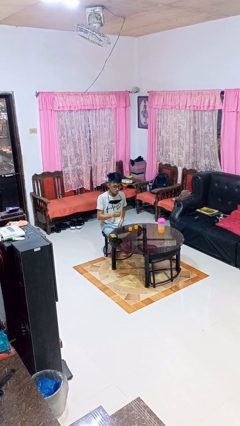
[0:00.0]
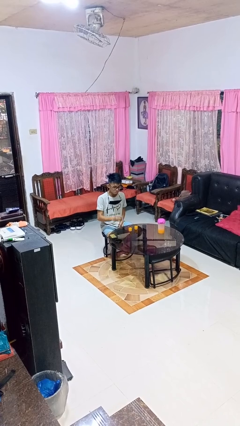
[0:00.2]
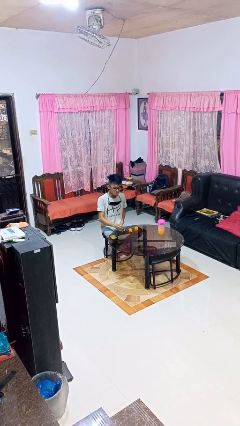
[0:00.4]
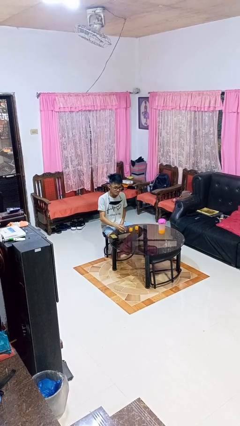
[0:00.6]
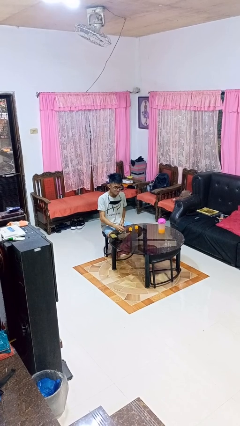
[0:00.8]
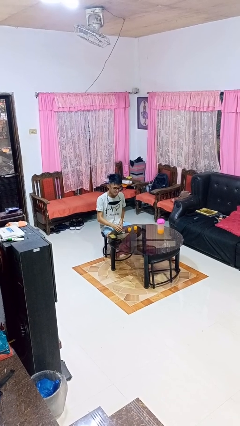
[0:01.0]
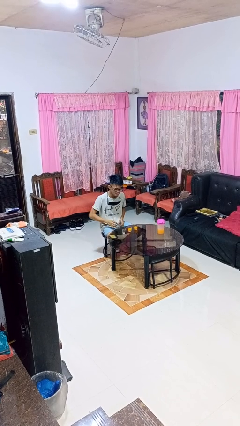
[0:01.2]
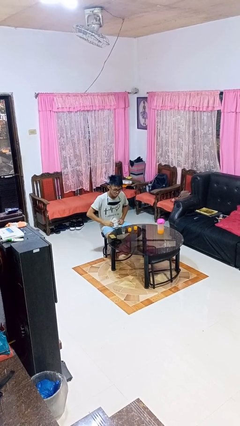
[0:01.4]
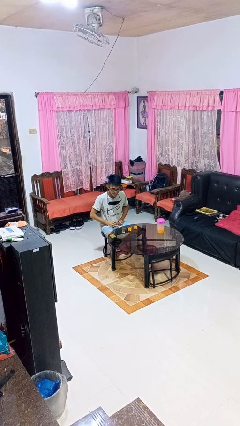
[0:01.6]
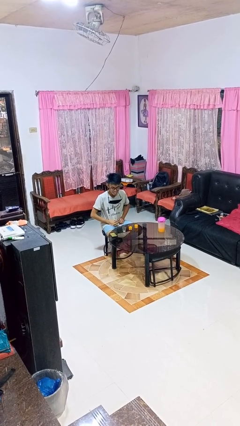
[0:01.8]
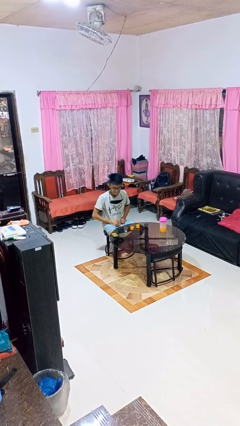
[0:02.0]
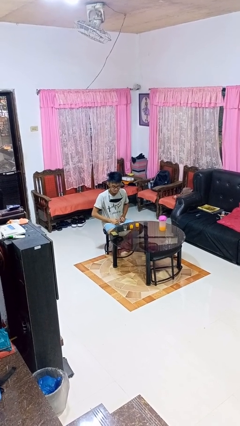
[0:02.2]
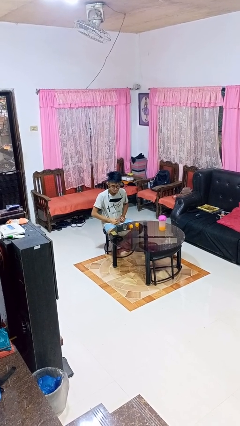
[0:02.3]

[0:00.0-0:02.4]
person puts down object on table

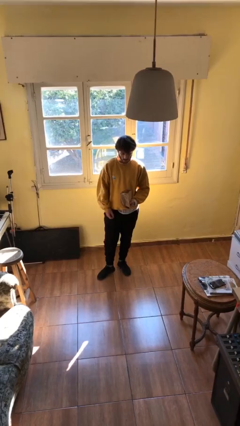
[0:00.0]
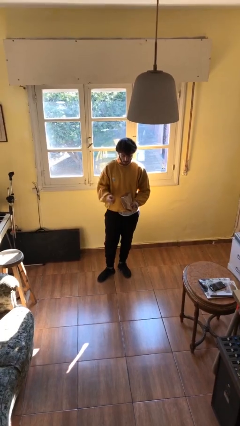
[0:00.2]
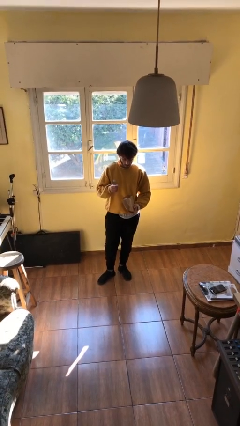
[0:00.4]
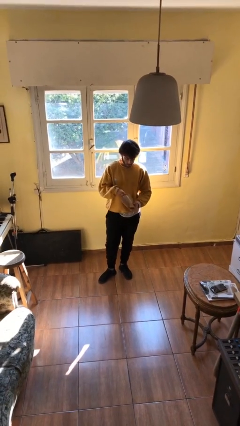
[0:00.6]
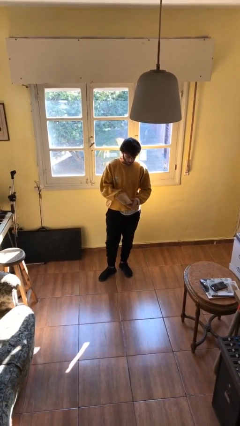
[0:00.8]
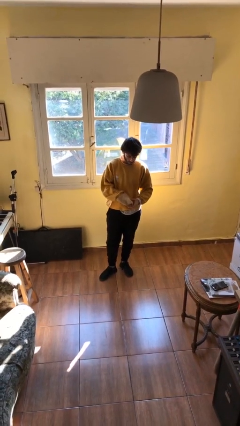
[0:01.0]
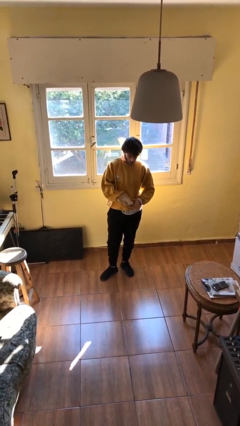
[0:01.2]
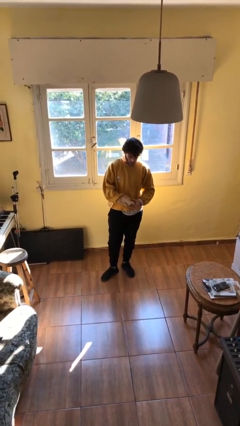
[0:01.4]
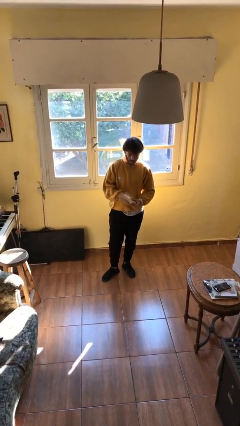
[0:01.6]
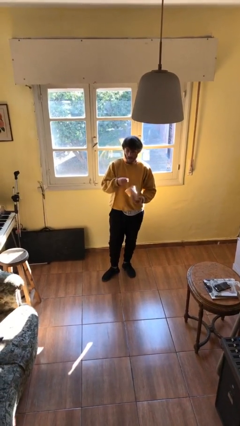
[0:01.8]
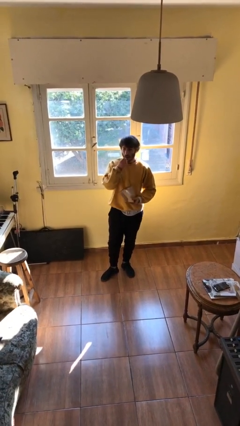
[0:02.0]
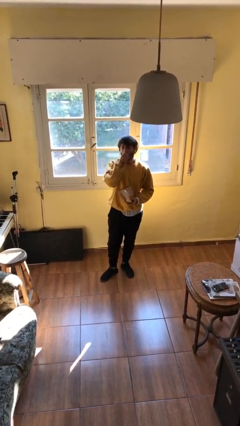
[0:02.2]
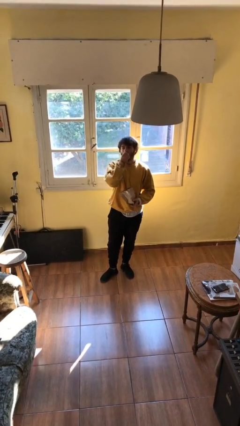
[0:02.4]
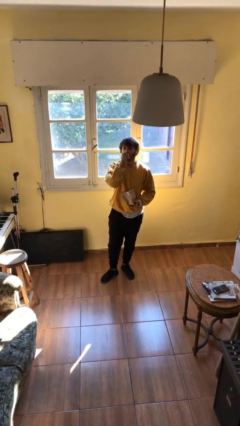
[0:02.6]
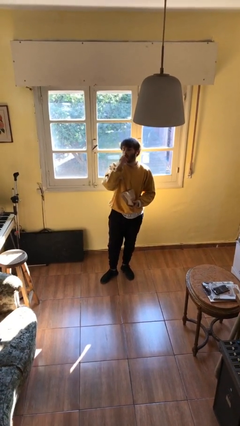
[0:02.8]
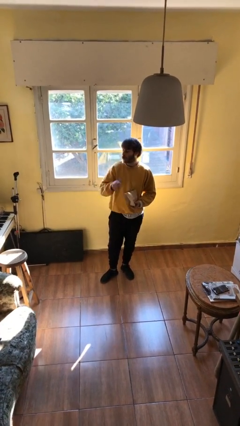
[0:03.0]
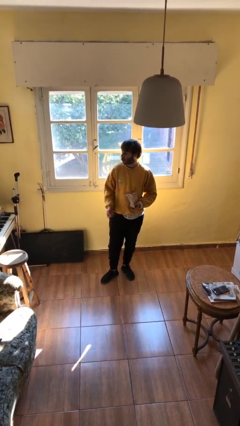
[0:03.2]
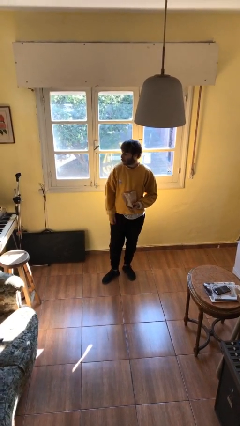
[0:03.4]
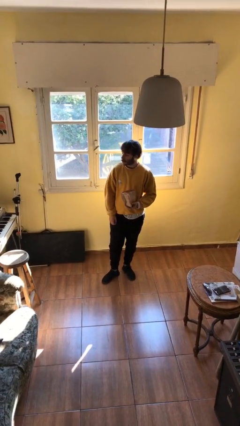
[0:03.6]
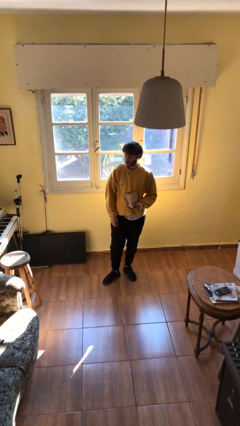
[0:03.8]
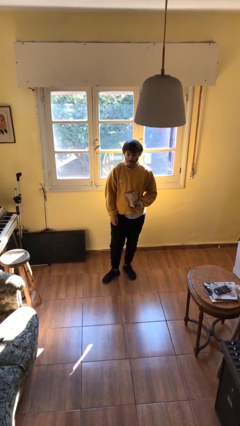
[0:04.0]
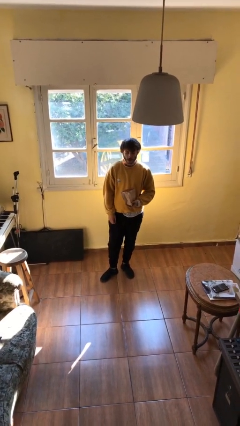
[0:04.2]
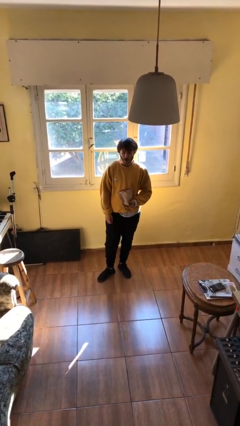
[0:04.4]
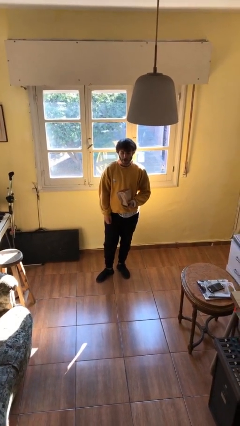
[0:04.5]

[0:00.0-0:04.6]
person eats snack from bag

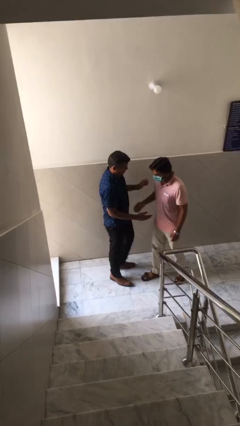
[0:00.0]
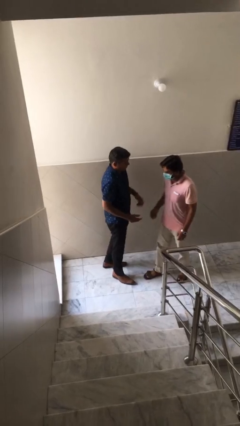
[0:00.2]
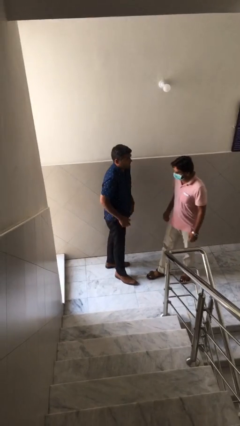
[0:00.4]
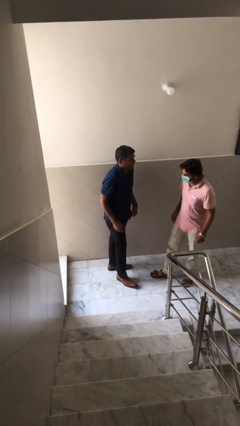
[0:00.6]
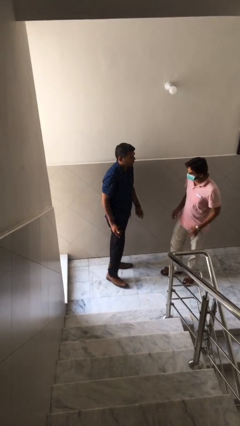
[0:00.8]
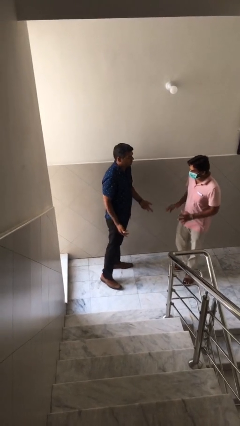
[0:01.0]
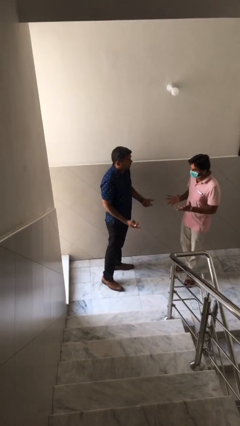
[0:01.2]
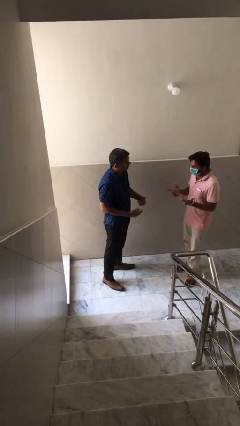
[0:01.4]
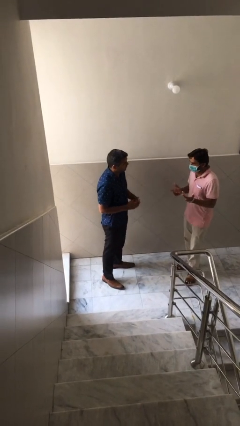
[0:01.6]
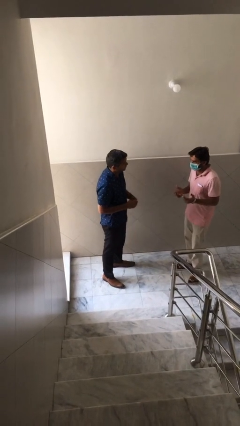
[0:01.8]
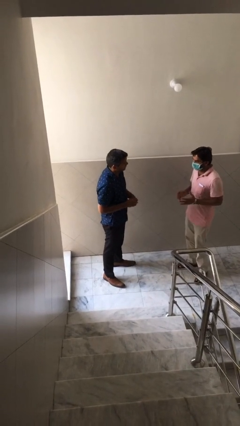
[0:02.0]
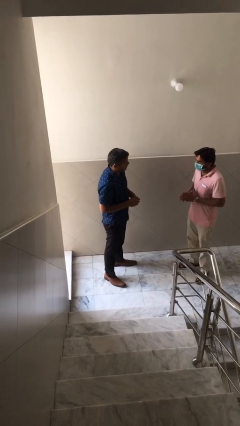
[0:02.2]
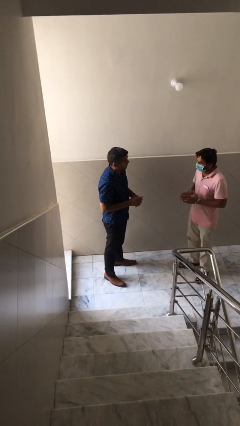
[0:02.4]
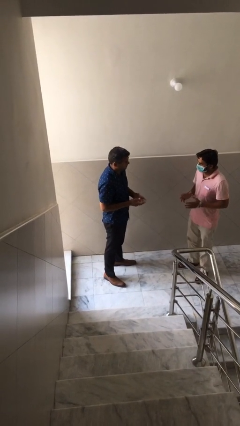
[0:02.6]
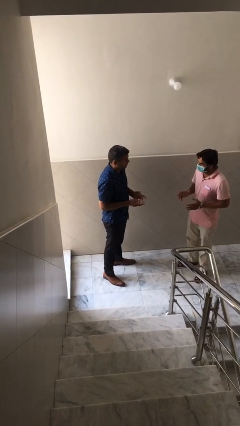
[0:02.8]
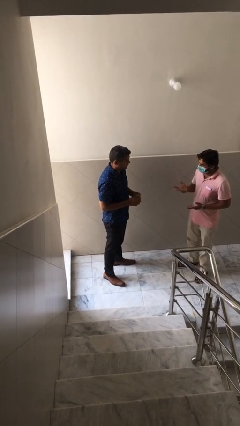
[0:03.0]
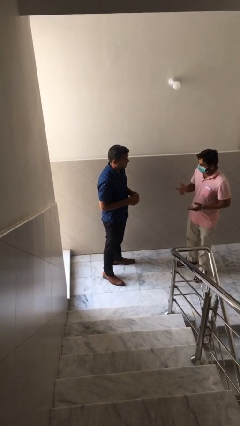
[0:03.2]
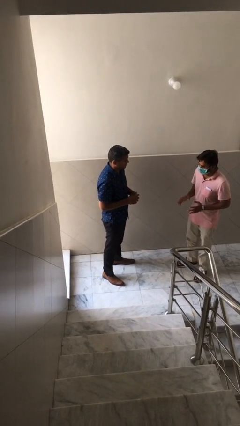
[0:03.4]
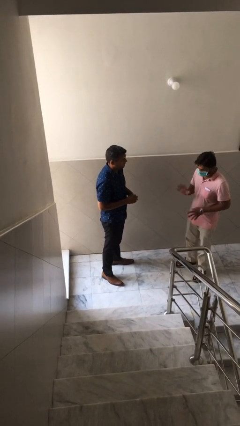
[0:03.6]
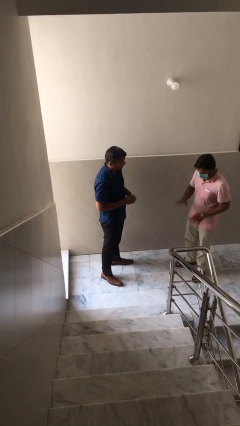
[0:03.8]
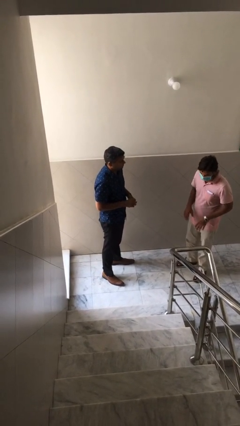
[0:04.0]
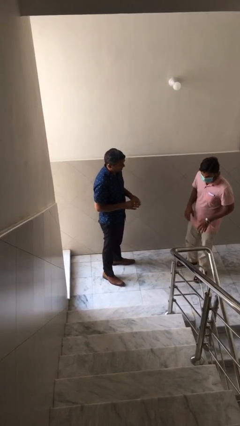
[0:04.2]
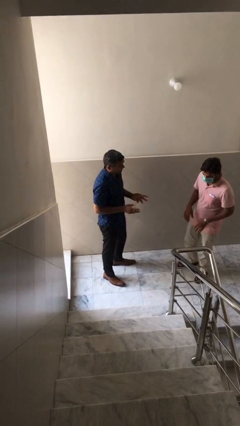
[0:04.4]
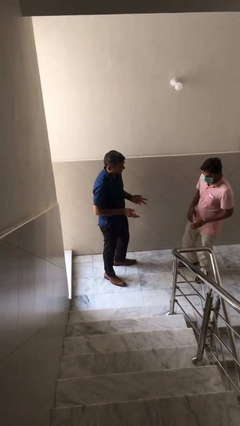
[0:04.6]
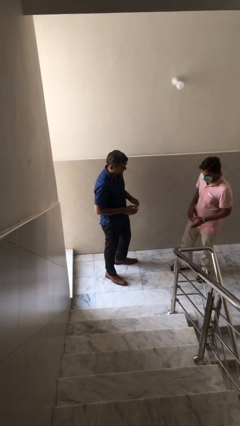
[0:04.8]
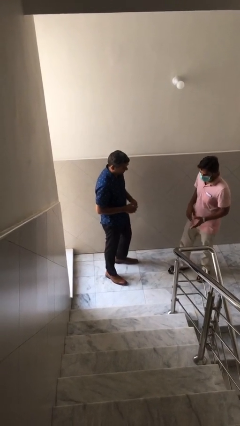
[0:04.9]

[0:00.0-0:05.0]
person talks to person

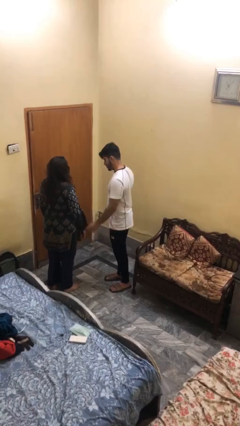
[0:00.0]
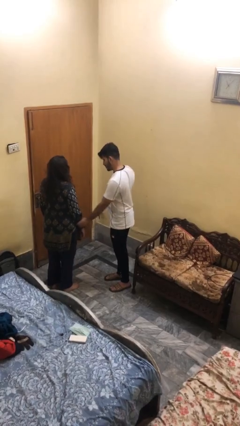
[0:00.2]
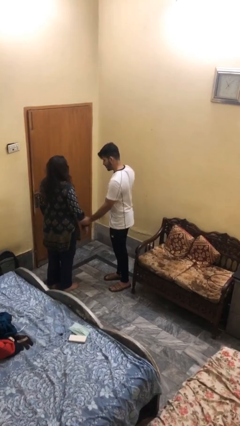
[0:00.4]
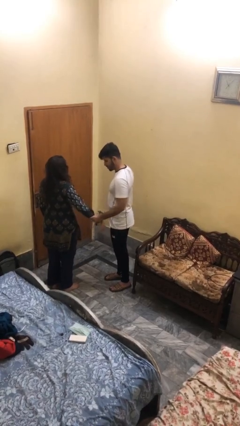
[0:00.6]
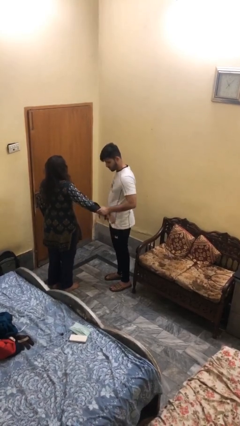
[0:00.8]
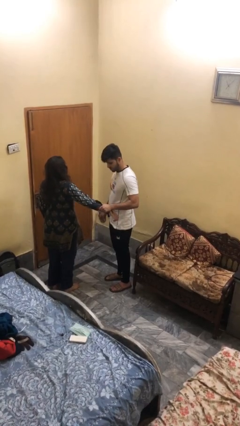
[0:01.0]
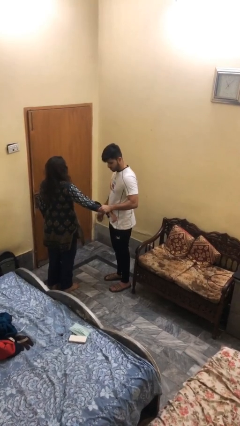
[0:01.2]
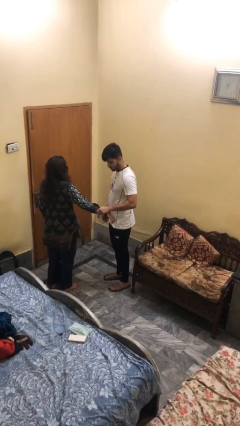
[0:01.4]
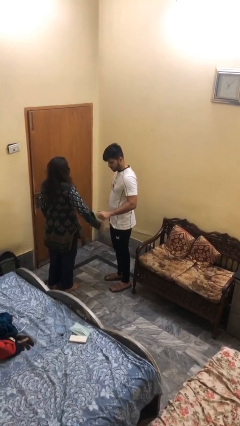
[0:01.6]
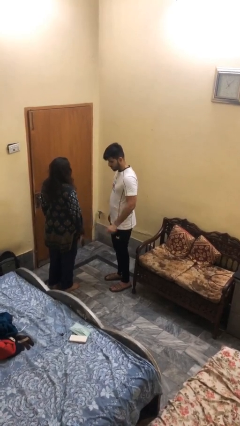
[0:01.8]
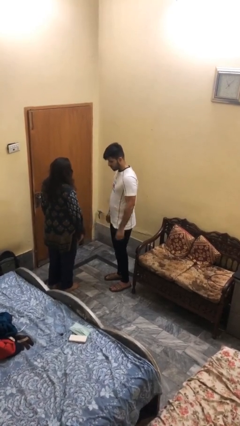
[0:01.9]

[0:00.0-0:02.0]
person grabs person by forearm

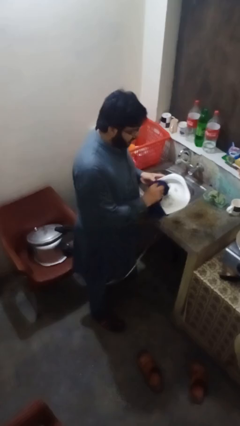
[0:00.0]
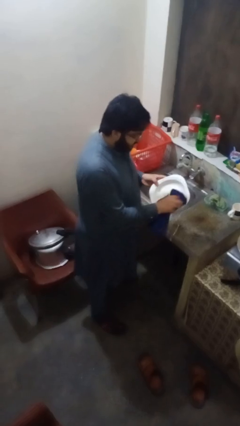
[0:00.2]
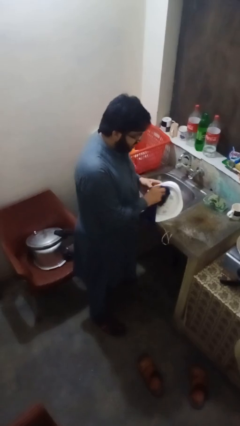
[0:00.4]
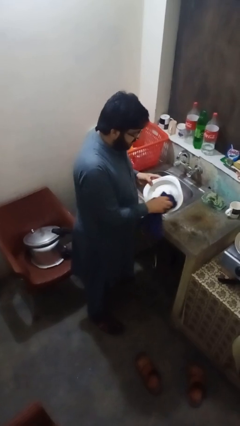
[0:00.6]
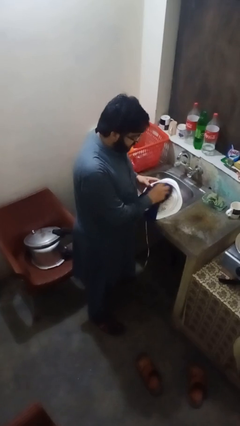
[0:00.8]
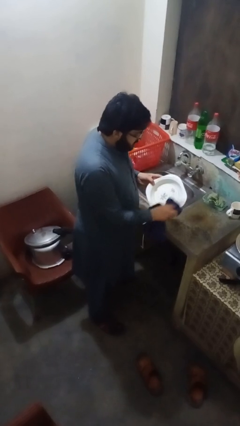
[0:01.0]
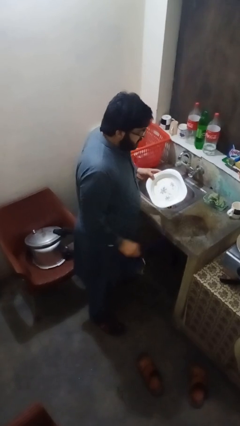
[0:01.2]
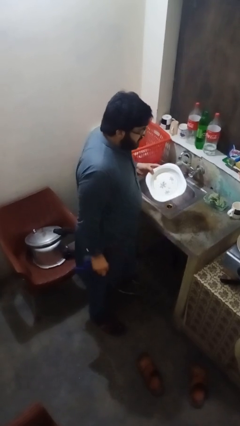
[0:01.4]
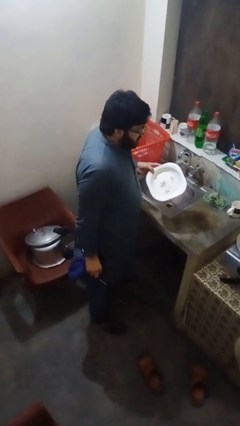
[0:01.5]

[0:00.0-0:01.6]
person dries dish

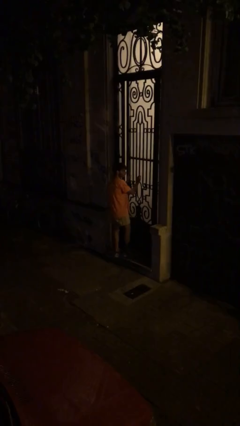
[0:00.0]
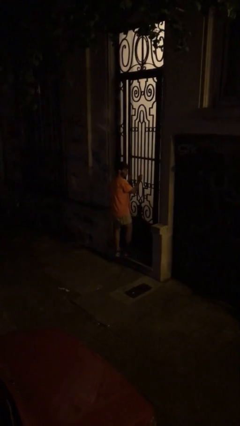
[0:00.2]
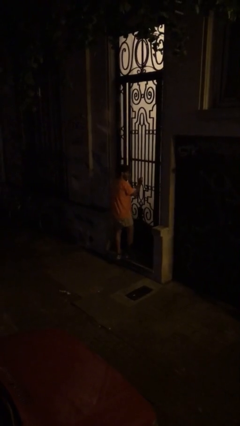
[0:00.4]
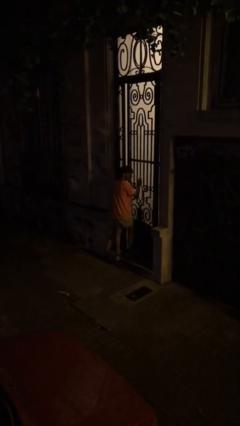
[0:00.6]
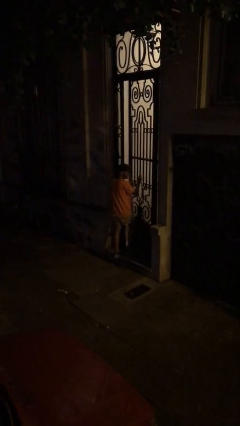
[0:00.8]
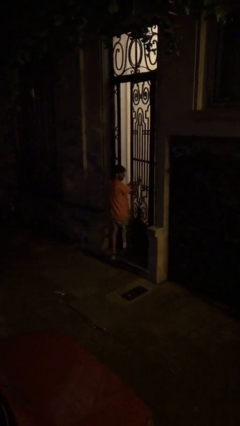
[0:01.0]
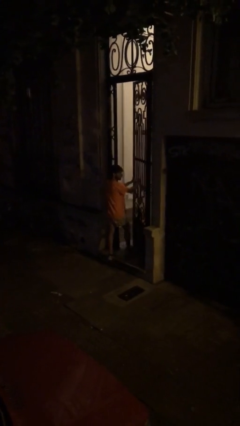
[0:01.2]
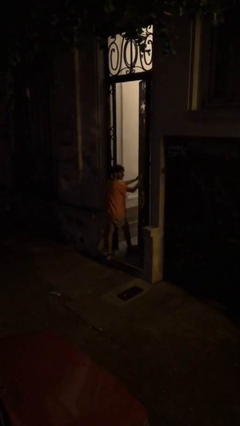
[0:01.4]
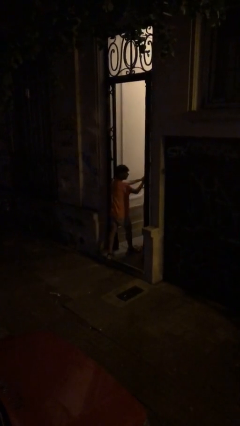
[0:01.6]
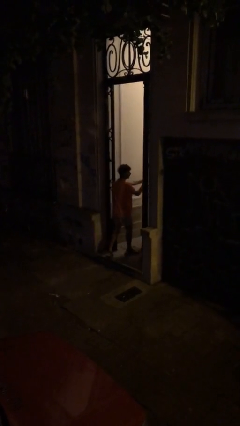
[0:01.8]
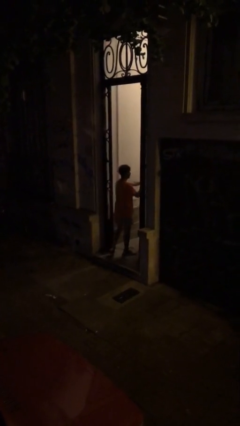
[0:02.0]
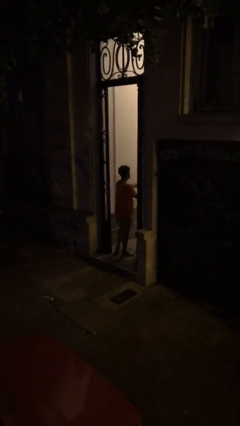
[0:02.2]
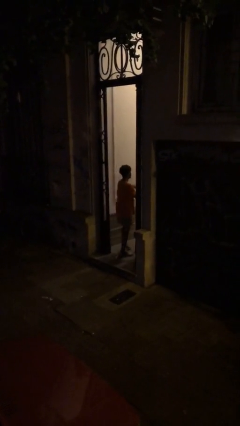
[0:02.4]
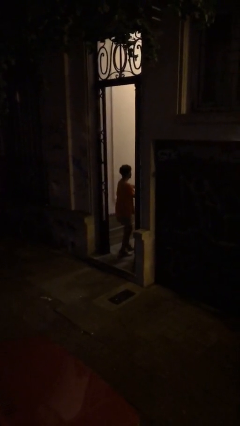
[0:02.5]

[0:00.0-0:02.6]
person opens facility door
